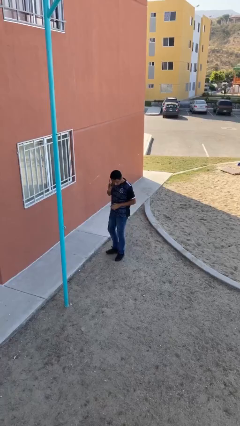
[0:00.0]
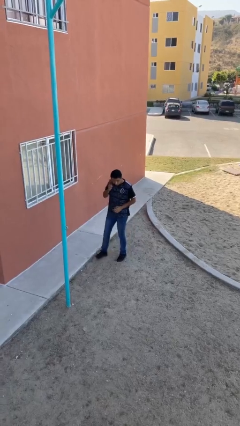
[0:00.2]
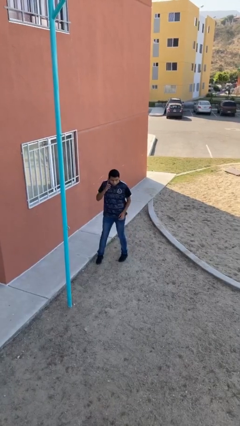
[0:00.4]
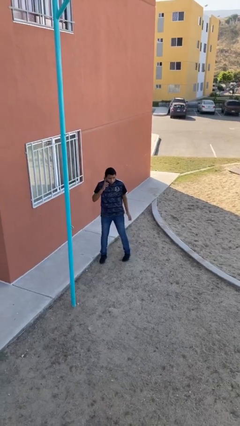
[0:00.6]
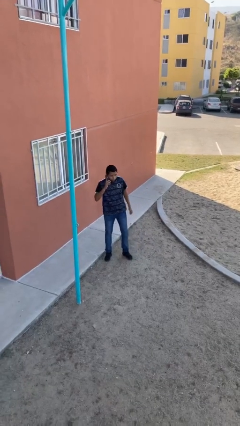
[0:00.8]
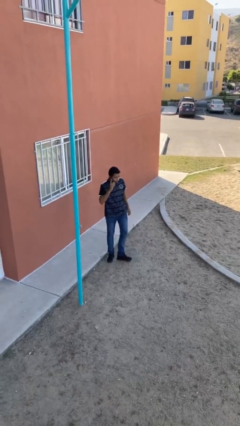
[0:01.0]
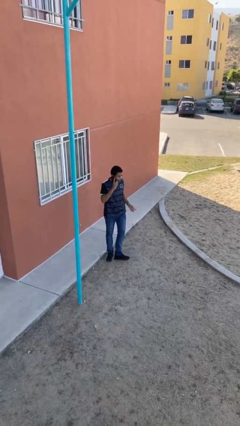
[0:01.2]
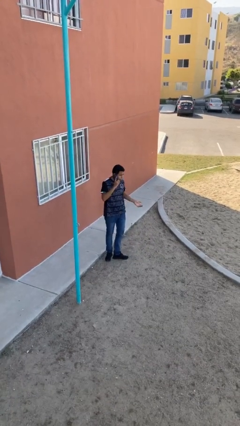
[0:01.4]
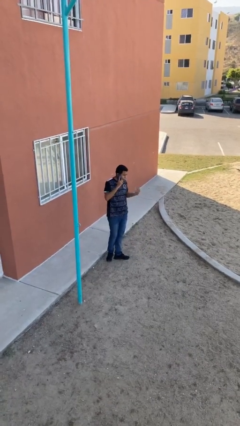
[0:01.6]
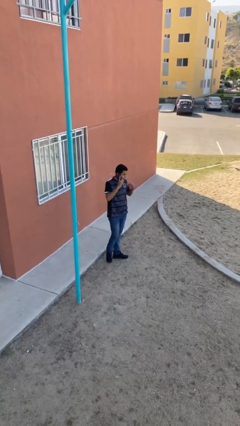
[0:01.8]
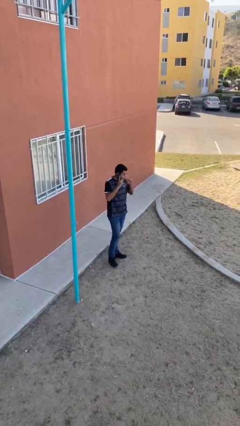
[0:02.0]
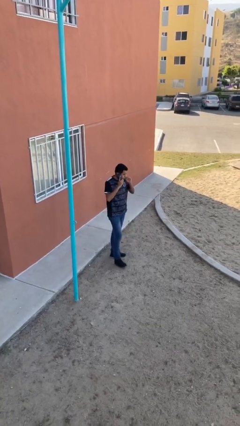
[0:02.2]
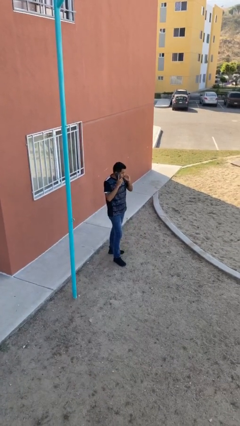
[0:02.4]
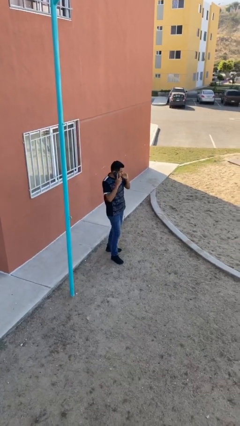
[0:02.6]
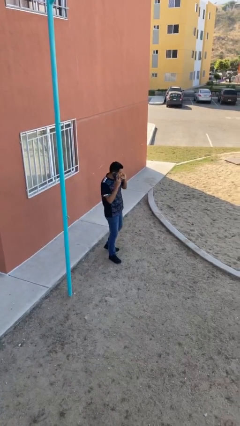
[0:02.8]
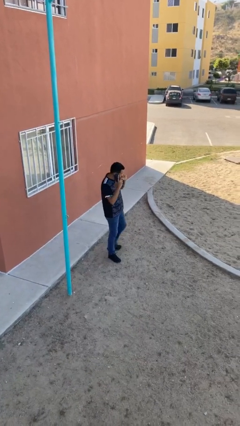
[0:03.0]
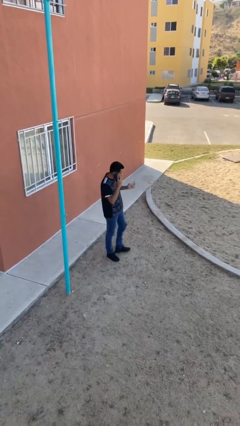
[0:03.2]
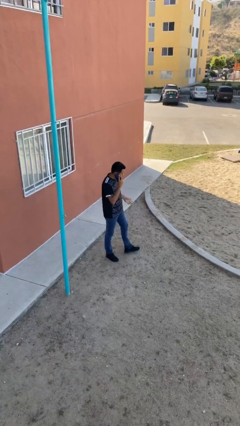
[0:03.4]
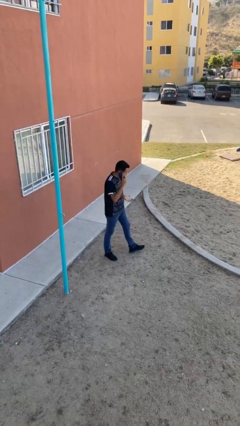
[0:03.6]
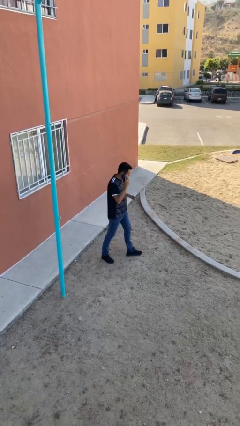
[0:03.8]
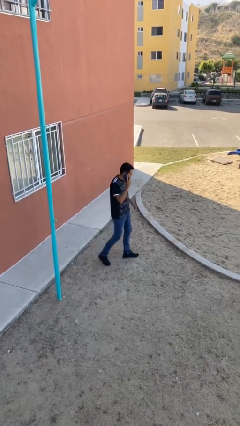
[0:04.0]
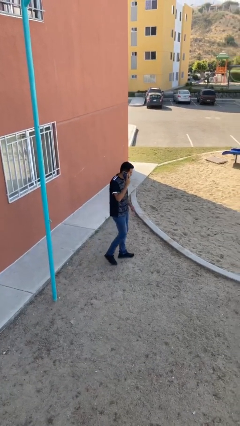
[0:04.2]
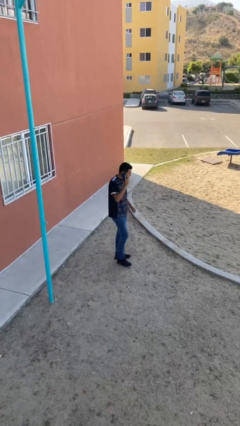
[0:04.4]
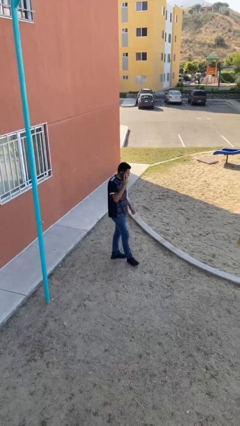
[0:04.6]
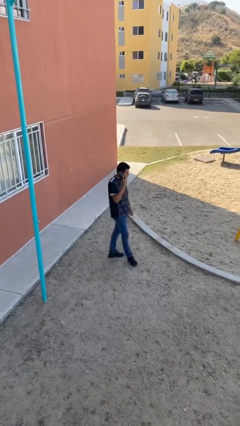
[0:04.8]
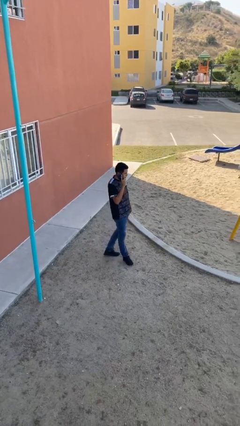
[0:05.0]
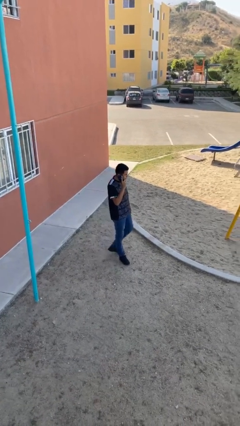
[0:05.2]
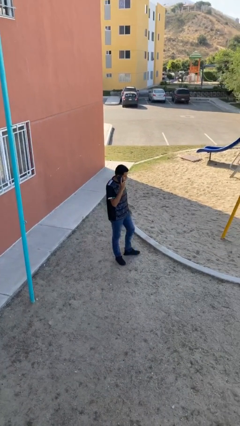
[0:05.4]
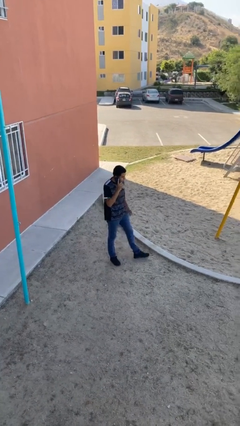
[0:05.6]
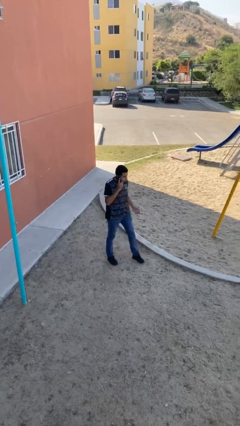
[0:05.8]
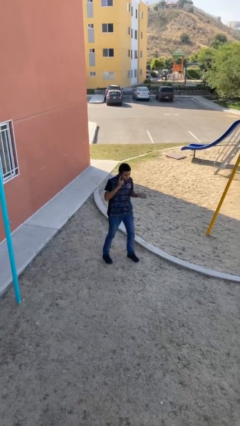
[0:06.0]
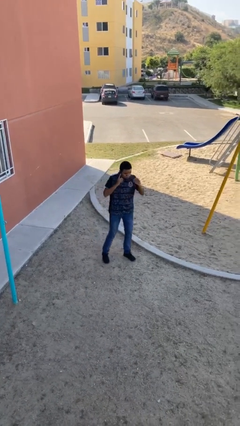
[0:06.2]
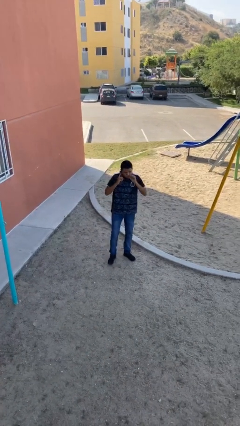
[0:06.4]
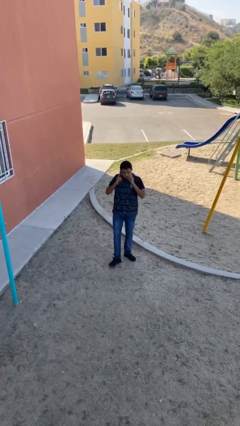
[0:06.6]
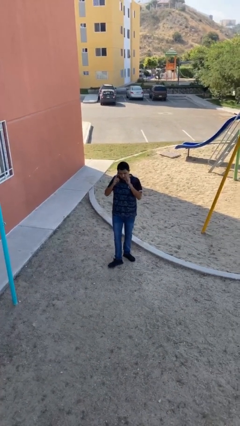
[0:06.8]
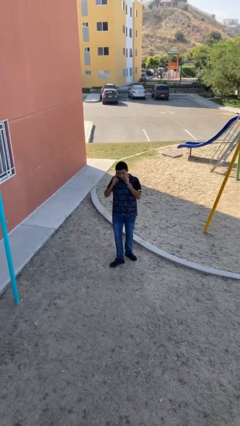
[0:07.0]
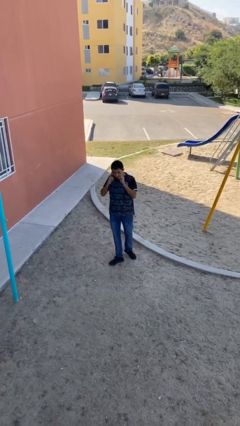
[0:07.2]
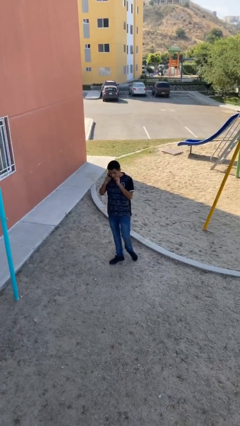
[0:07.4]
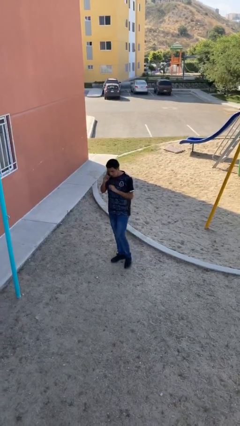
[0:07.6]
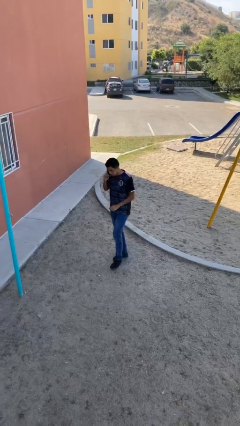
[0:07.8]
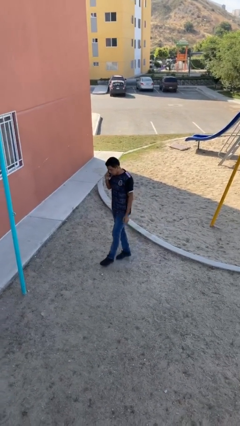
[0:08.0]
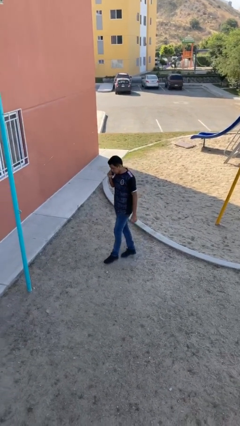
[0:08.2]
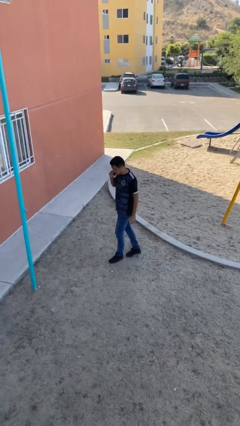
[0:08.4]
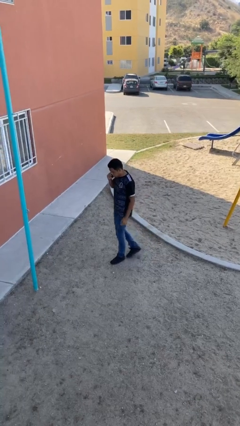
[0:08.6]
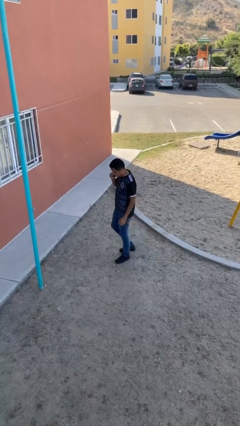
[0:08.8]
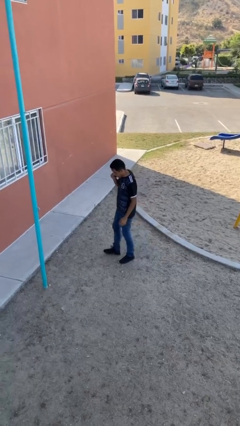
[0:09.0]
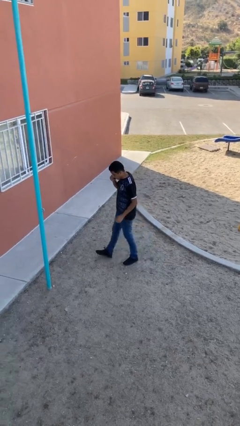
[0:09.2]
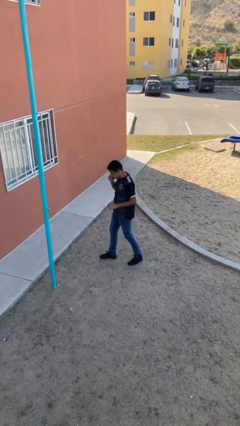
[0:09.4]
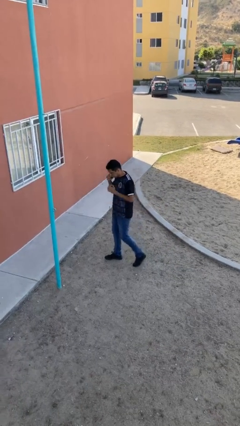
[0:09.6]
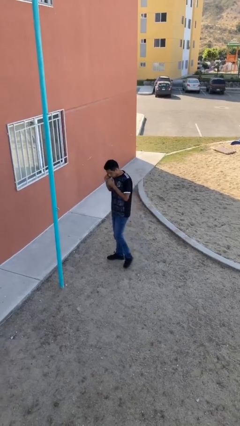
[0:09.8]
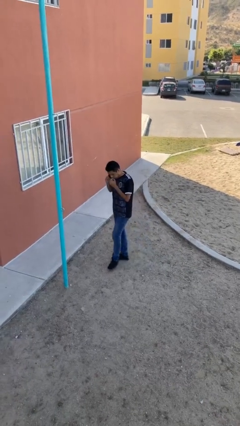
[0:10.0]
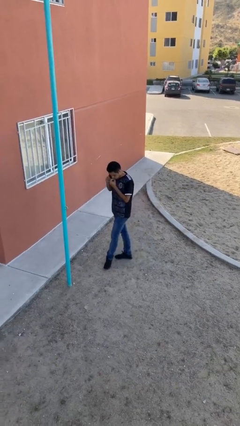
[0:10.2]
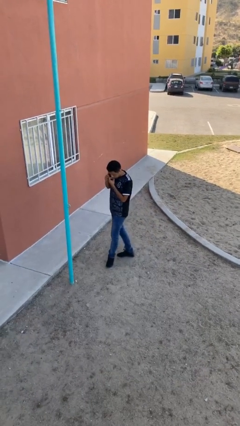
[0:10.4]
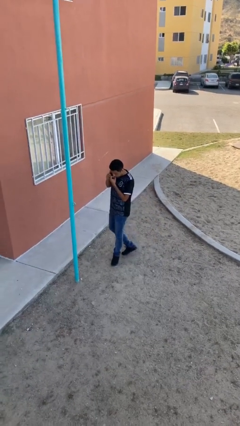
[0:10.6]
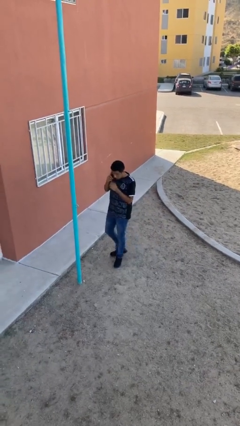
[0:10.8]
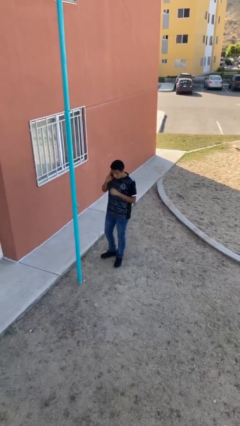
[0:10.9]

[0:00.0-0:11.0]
person talks on phone

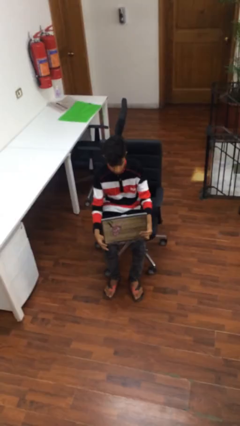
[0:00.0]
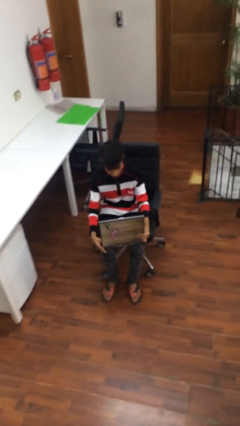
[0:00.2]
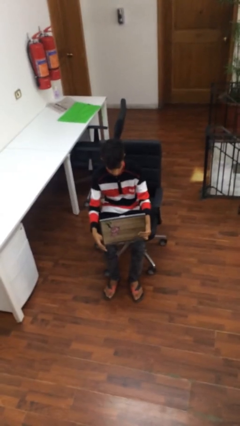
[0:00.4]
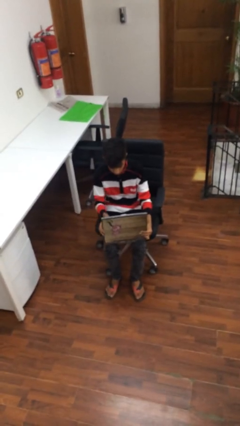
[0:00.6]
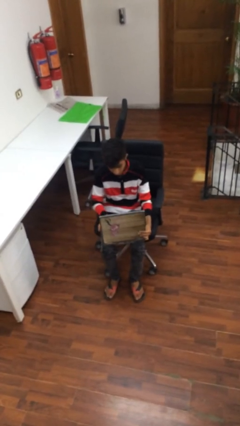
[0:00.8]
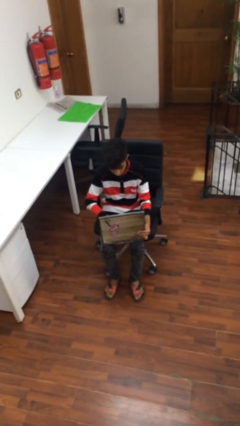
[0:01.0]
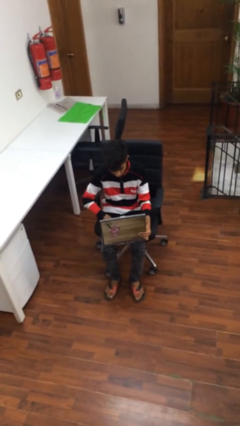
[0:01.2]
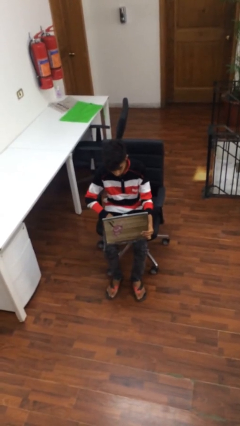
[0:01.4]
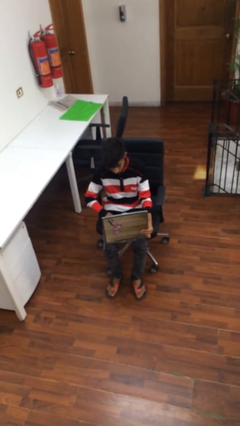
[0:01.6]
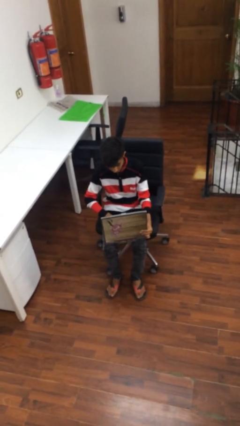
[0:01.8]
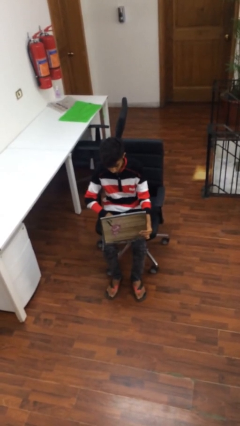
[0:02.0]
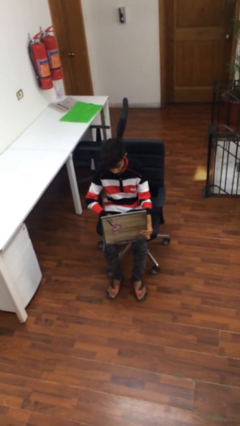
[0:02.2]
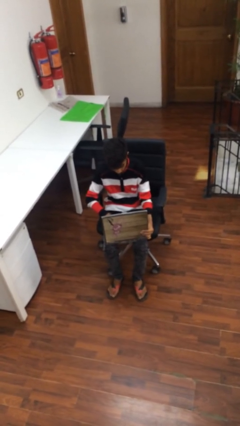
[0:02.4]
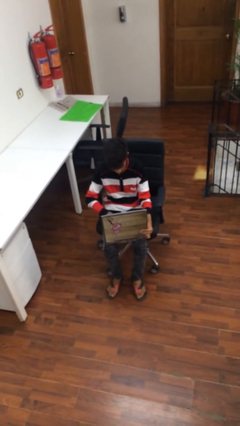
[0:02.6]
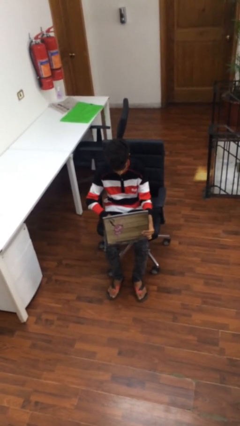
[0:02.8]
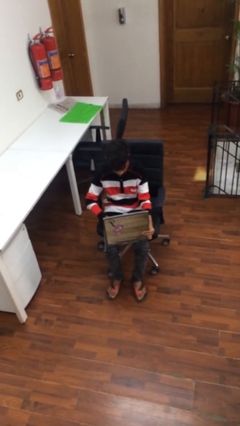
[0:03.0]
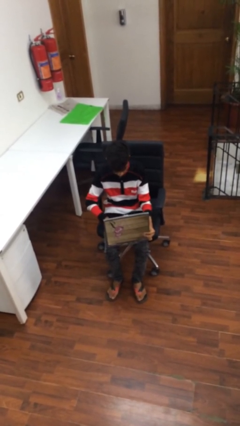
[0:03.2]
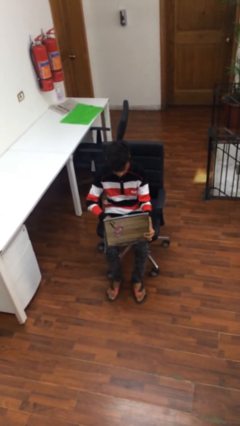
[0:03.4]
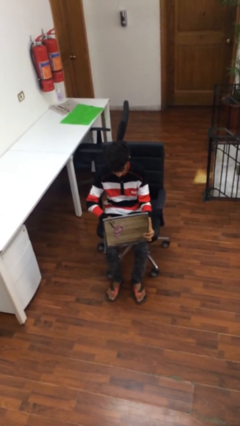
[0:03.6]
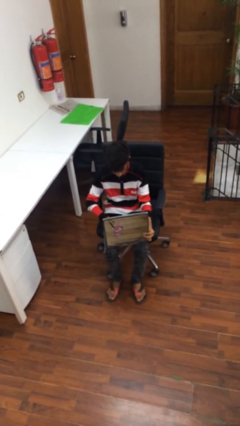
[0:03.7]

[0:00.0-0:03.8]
person interacts with laptop

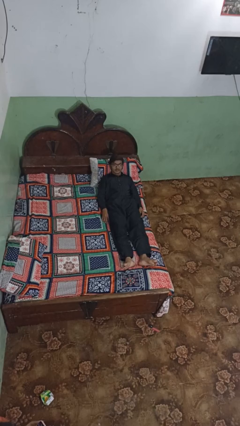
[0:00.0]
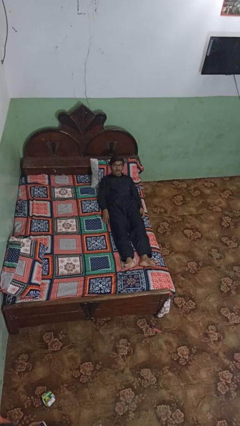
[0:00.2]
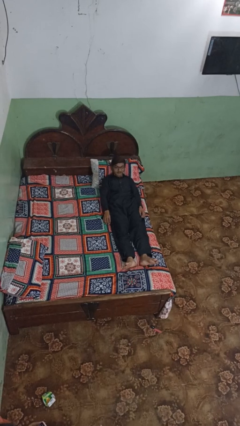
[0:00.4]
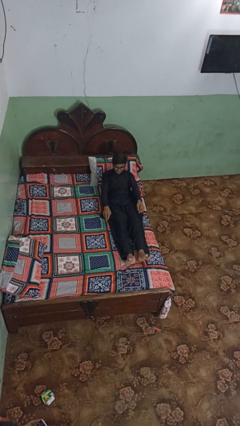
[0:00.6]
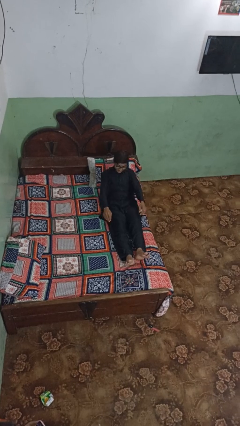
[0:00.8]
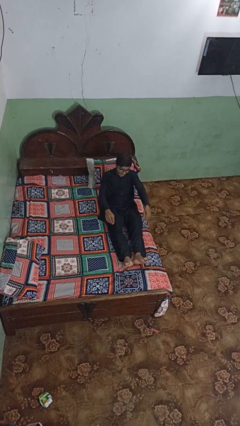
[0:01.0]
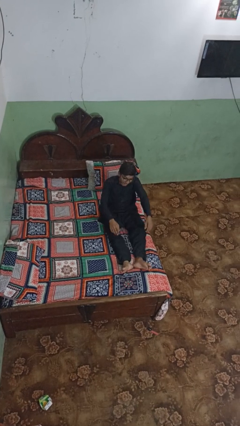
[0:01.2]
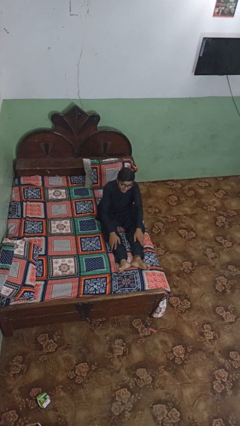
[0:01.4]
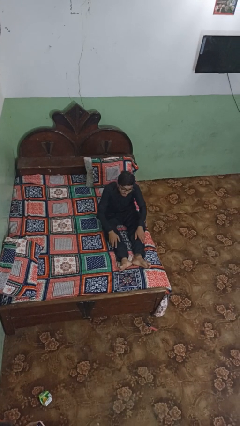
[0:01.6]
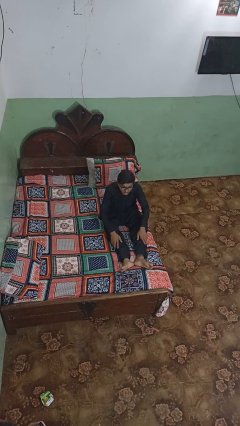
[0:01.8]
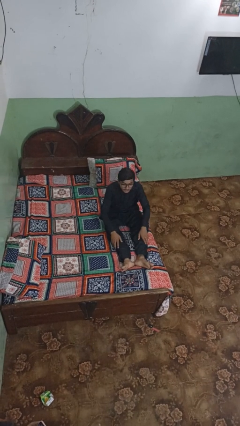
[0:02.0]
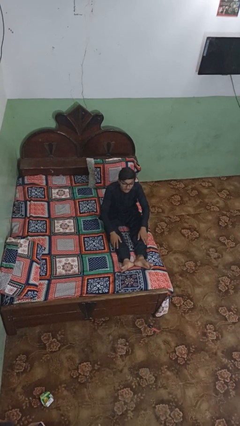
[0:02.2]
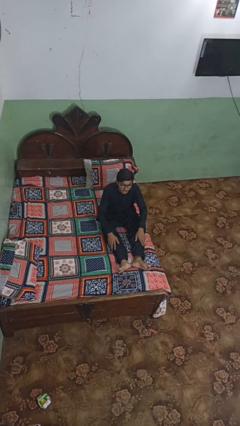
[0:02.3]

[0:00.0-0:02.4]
person stands up

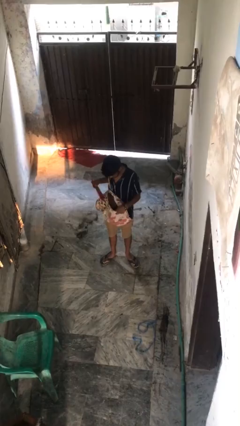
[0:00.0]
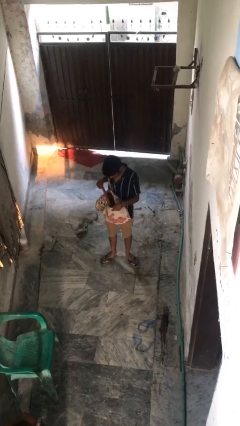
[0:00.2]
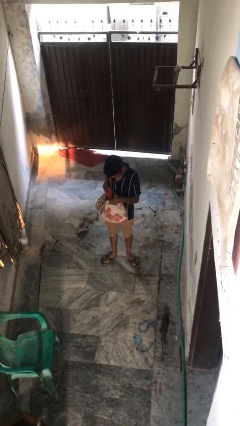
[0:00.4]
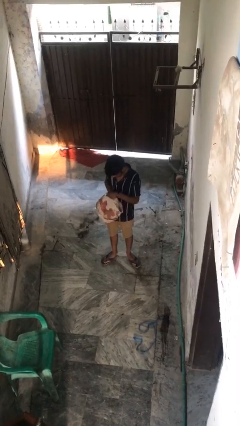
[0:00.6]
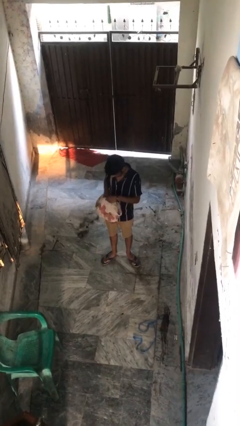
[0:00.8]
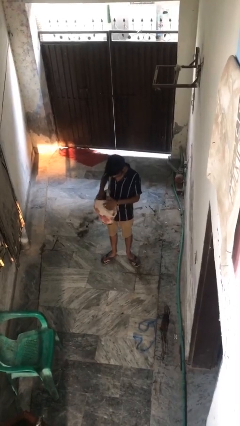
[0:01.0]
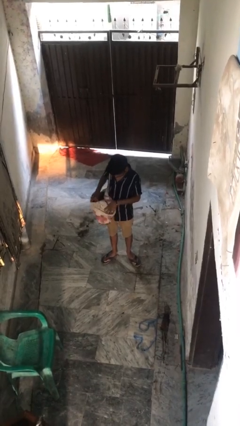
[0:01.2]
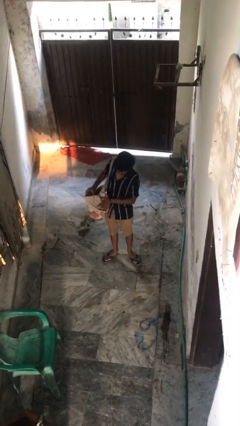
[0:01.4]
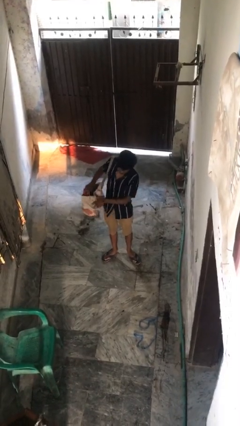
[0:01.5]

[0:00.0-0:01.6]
person puts object into backpack
